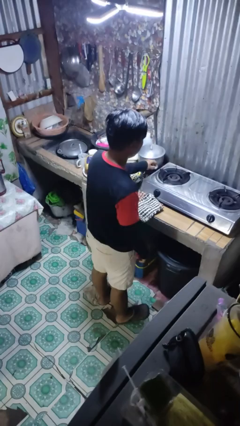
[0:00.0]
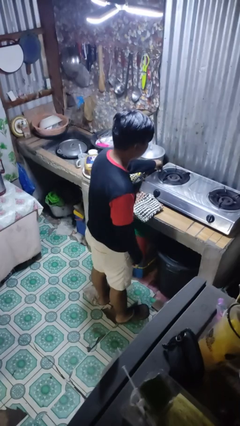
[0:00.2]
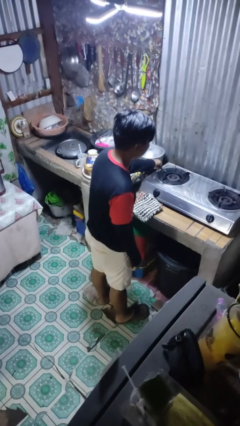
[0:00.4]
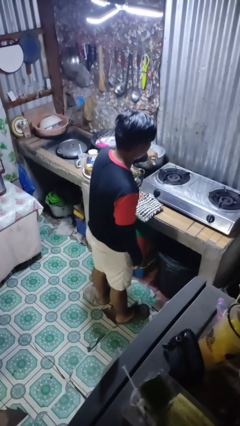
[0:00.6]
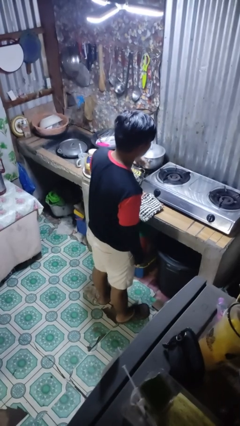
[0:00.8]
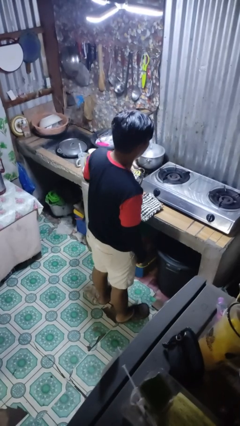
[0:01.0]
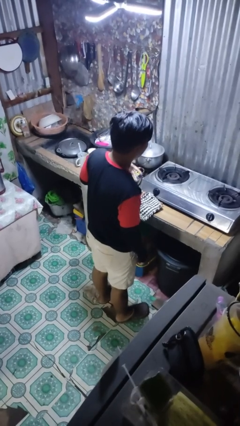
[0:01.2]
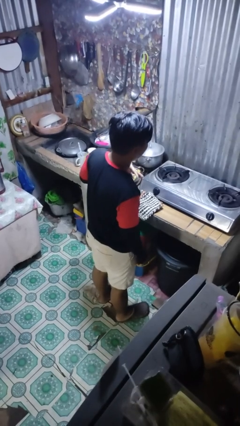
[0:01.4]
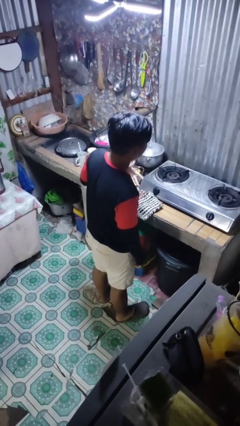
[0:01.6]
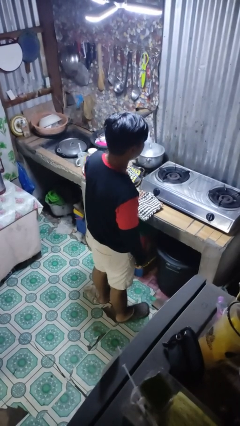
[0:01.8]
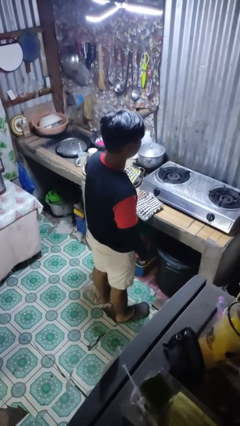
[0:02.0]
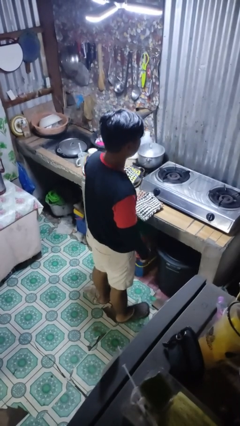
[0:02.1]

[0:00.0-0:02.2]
person burns hand

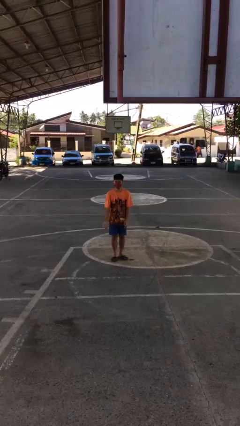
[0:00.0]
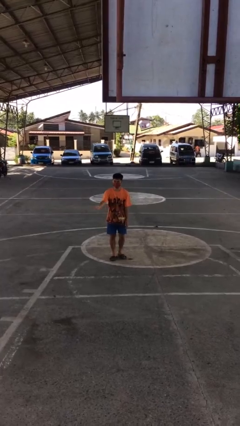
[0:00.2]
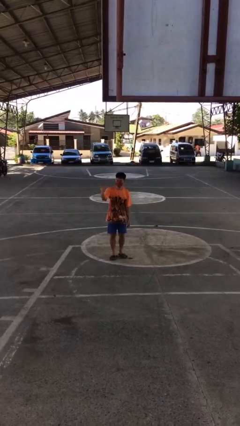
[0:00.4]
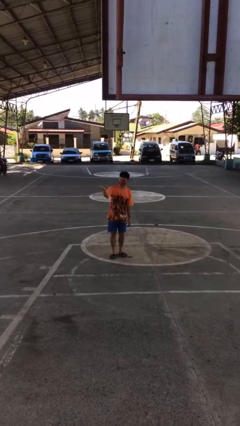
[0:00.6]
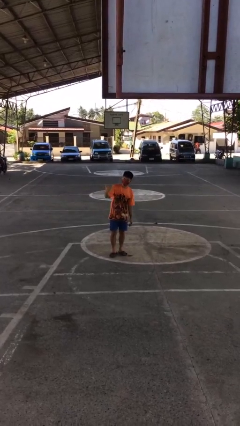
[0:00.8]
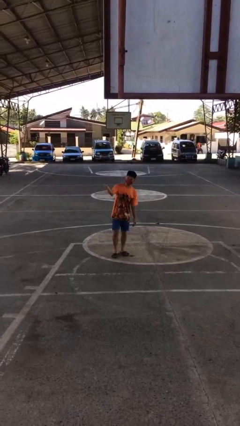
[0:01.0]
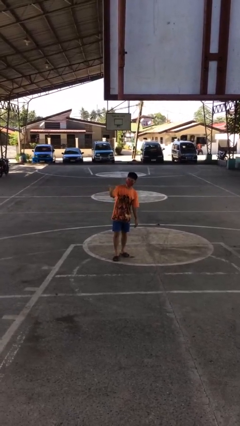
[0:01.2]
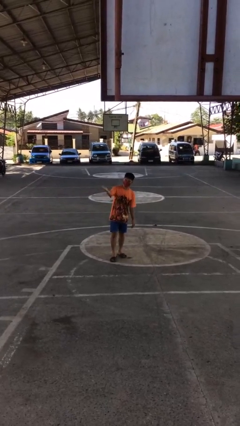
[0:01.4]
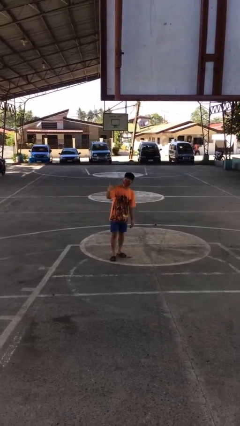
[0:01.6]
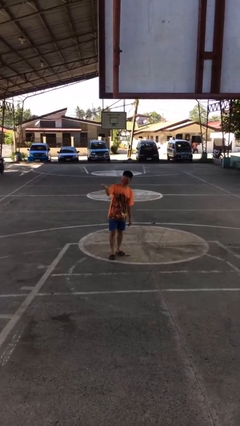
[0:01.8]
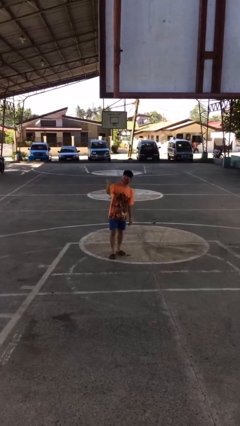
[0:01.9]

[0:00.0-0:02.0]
person gestures come here

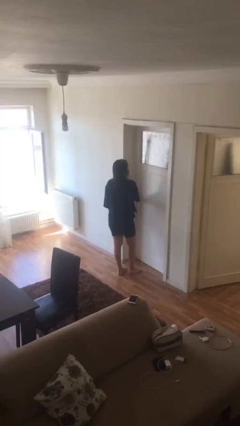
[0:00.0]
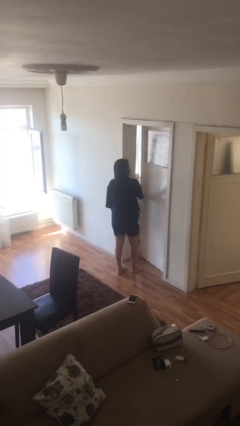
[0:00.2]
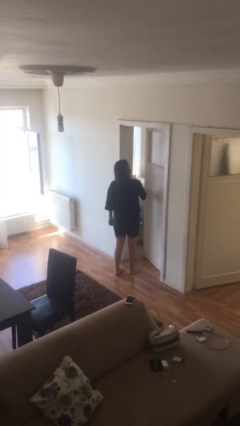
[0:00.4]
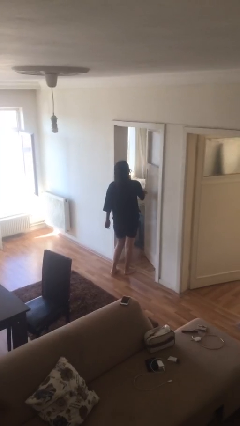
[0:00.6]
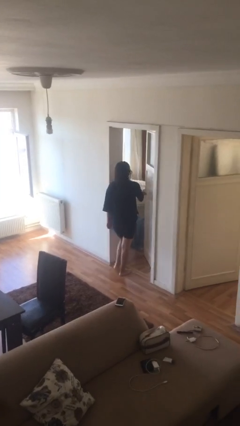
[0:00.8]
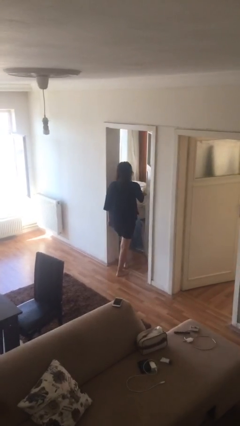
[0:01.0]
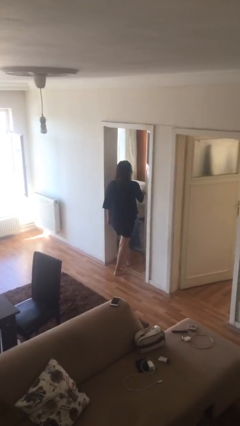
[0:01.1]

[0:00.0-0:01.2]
person opens facility door

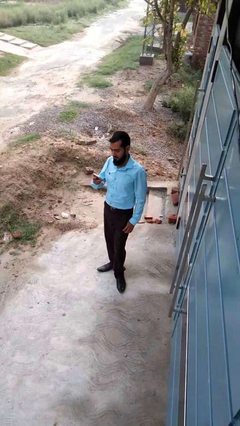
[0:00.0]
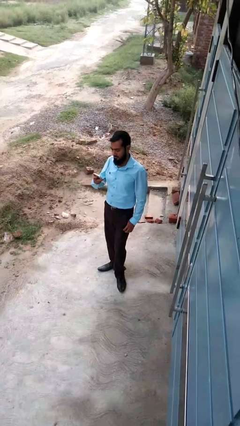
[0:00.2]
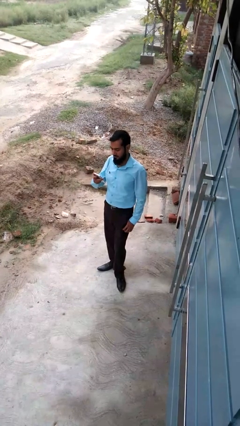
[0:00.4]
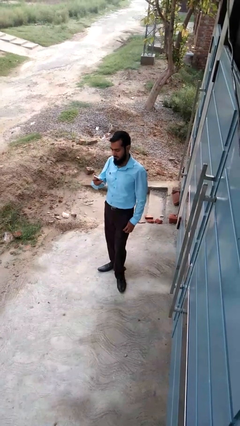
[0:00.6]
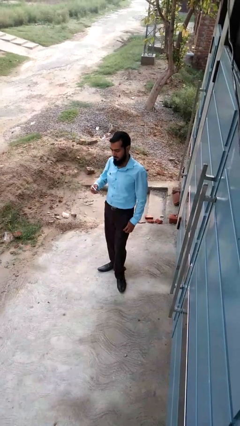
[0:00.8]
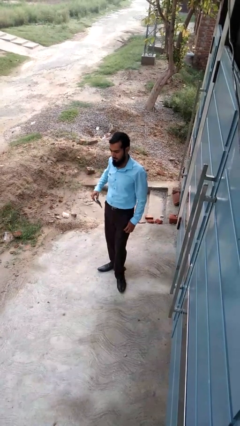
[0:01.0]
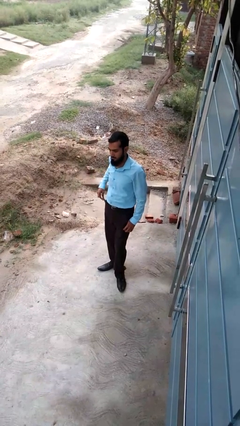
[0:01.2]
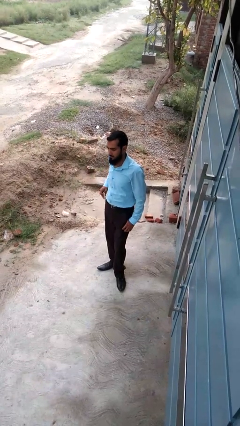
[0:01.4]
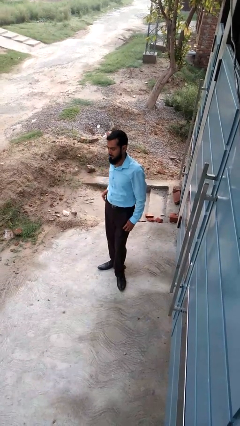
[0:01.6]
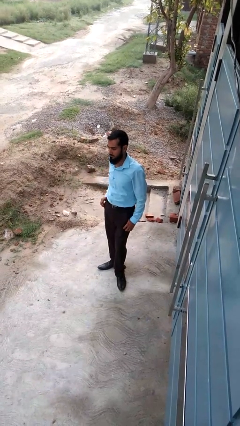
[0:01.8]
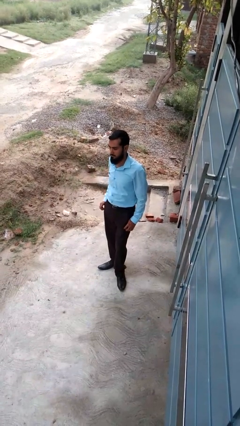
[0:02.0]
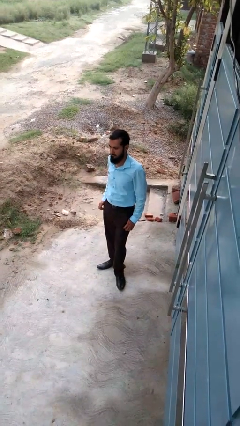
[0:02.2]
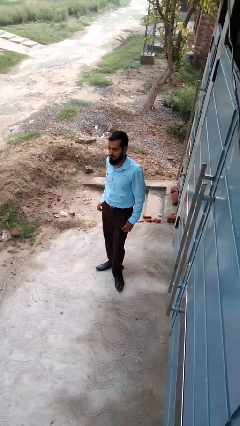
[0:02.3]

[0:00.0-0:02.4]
person puts phone into pocket

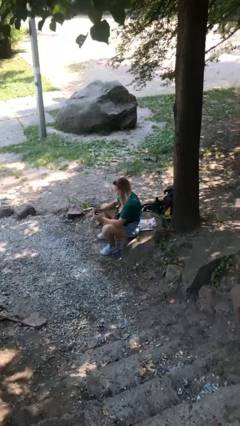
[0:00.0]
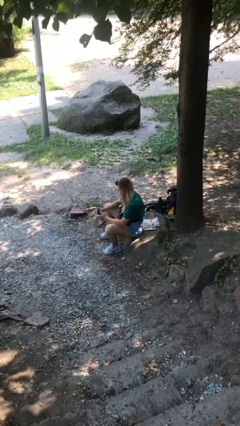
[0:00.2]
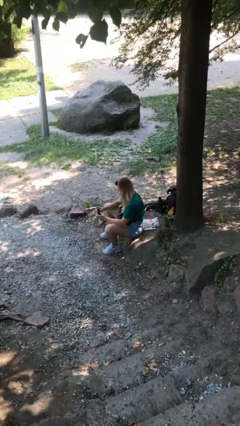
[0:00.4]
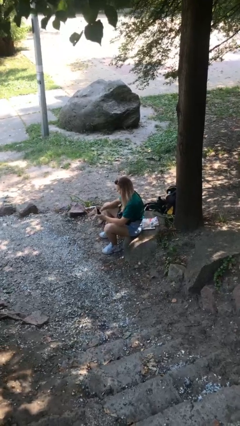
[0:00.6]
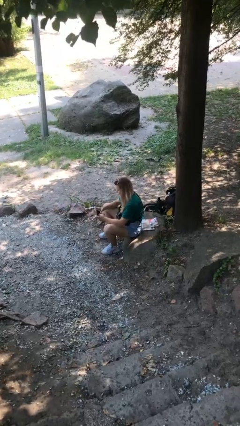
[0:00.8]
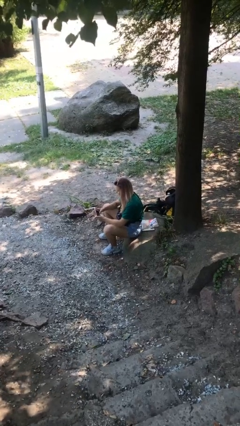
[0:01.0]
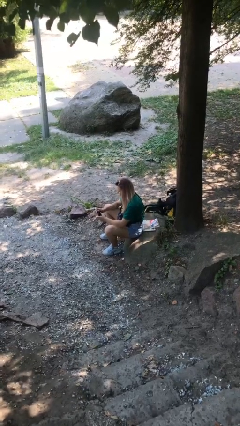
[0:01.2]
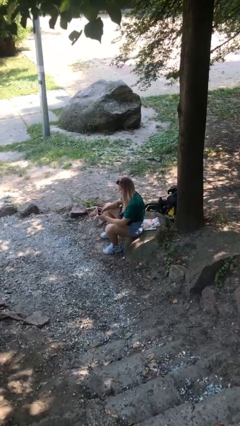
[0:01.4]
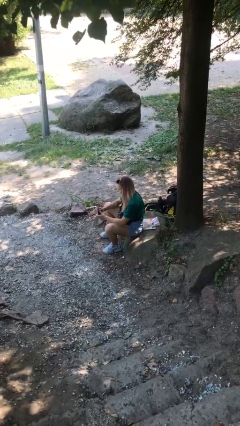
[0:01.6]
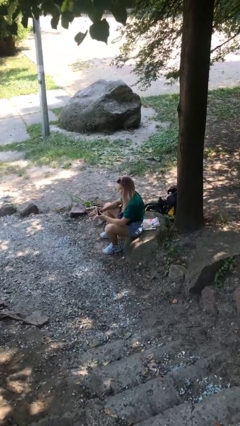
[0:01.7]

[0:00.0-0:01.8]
person interacts with handheld game

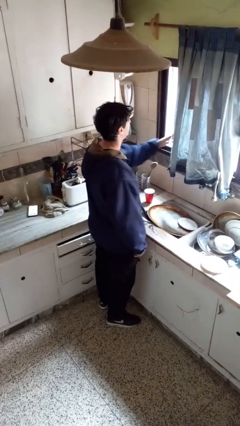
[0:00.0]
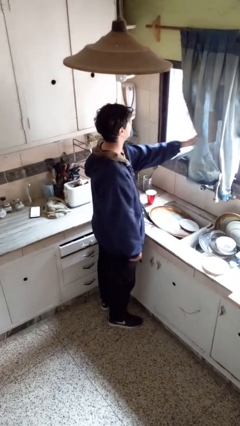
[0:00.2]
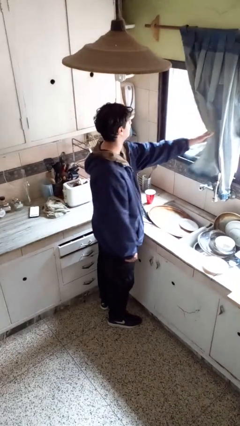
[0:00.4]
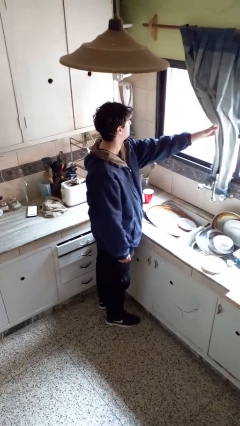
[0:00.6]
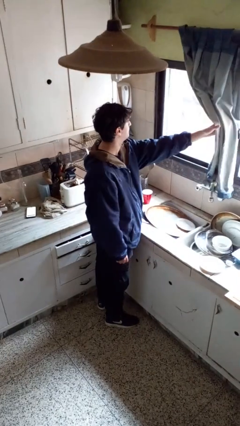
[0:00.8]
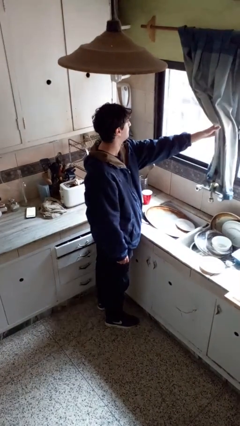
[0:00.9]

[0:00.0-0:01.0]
person opens curtains

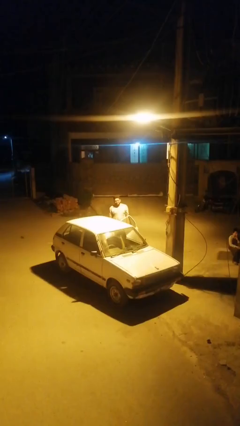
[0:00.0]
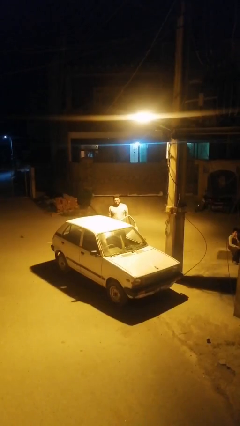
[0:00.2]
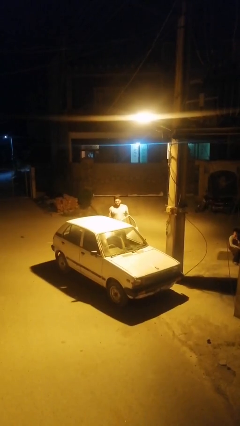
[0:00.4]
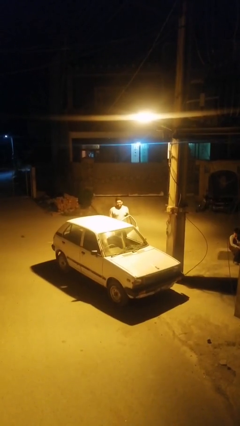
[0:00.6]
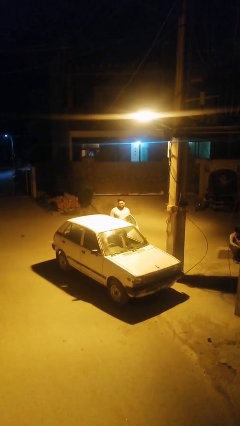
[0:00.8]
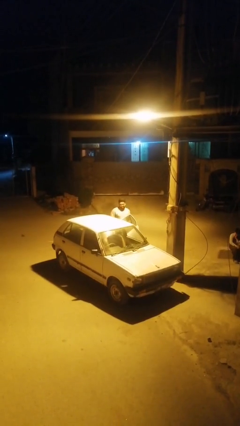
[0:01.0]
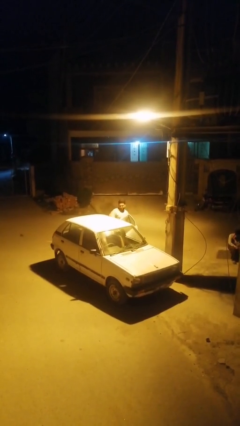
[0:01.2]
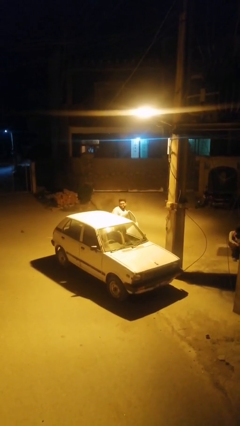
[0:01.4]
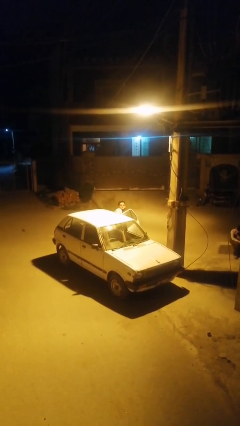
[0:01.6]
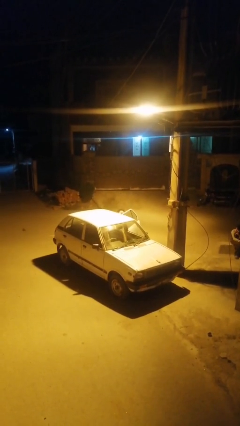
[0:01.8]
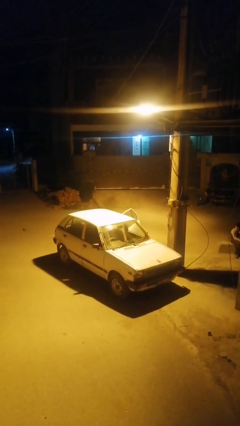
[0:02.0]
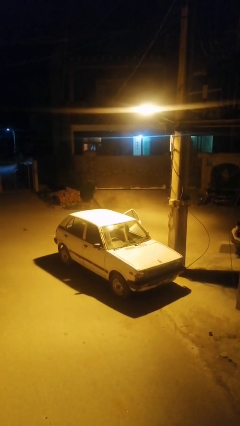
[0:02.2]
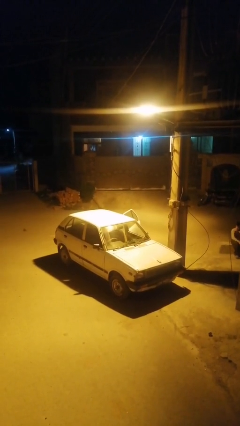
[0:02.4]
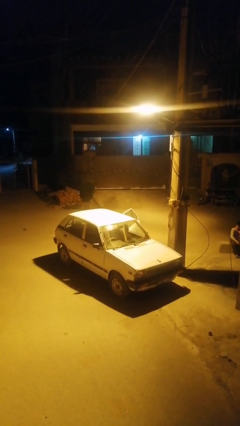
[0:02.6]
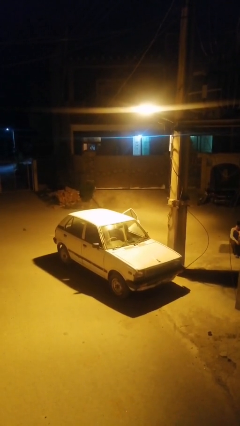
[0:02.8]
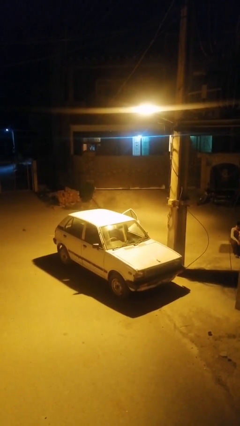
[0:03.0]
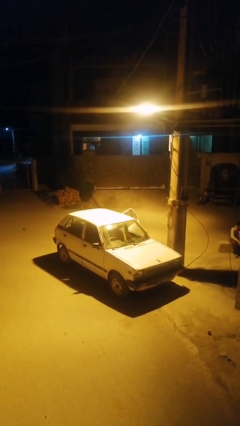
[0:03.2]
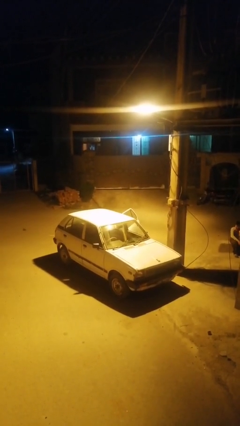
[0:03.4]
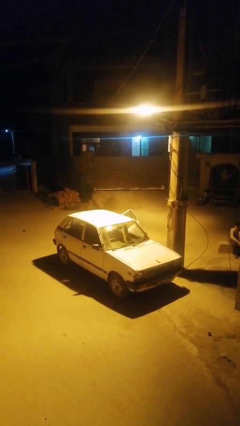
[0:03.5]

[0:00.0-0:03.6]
person enters car

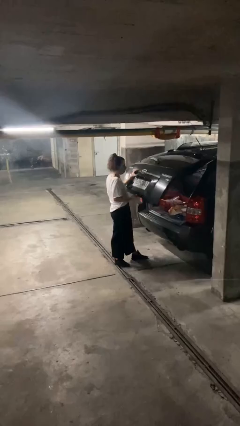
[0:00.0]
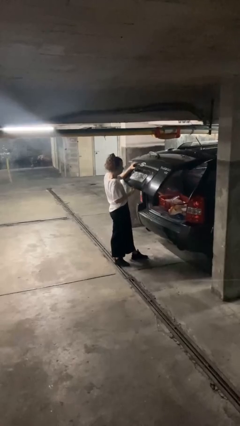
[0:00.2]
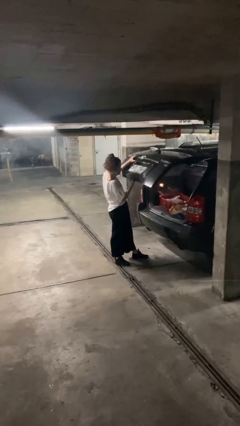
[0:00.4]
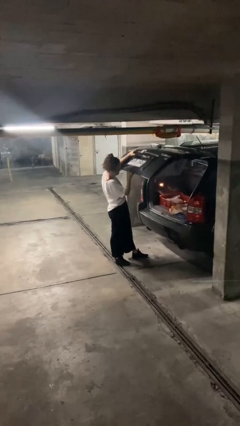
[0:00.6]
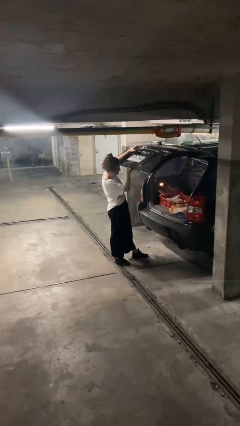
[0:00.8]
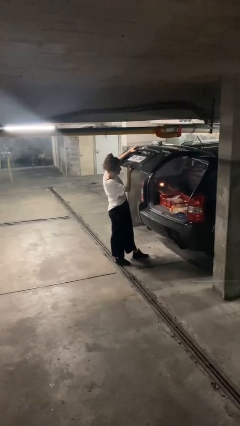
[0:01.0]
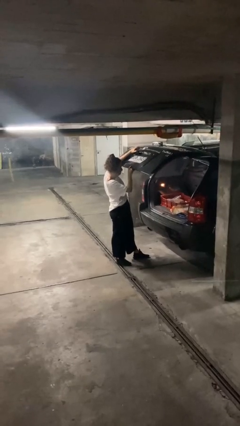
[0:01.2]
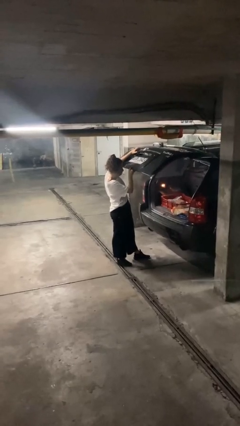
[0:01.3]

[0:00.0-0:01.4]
person opens car trunk

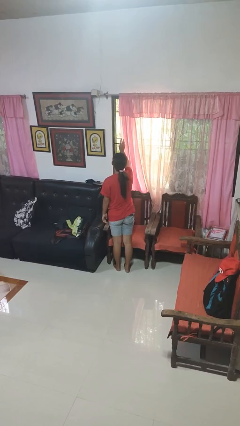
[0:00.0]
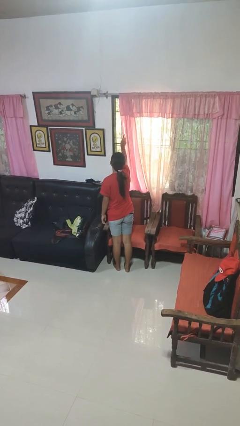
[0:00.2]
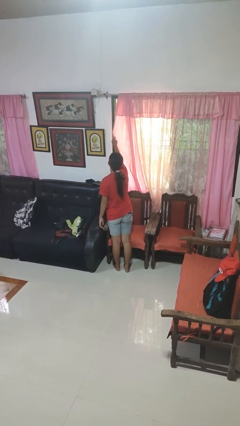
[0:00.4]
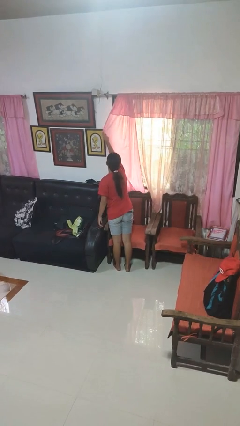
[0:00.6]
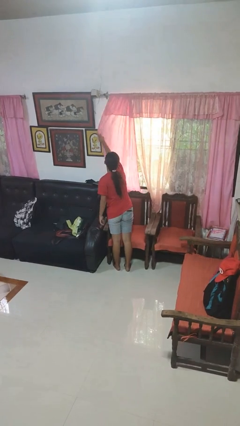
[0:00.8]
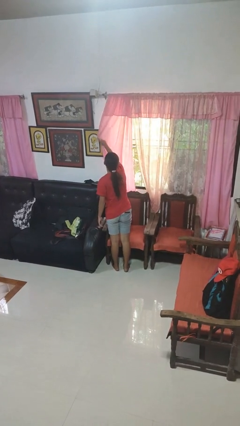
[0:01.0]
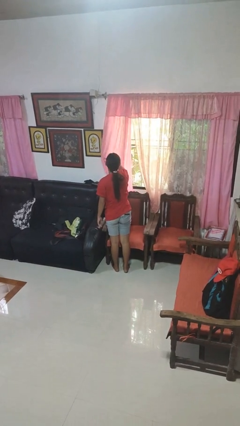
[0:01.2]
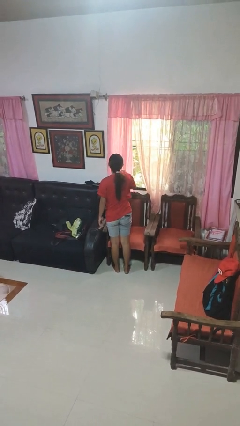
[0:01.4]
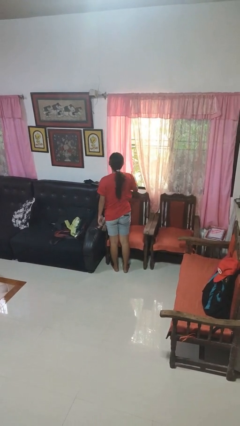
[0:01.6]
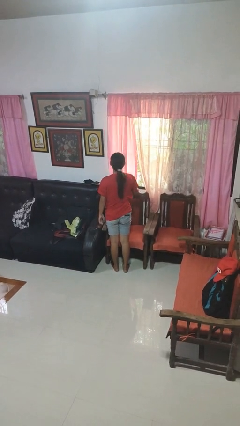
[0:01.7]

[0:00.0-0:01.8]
person closes curtains
